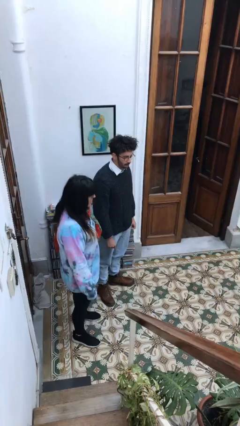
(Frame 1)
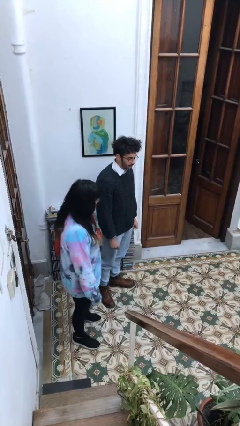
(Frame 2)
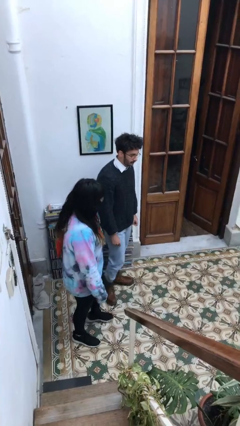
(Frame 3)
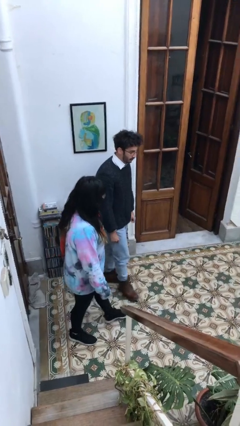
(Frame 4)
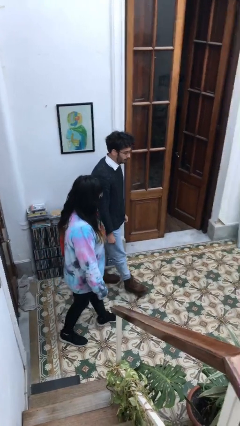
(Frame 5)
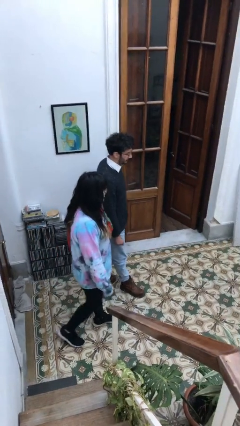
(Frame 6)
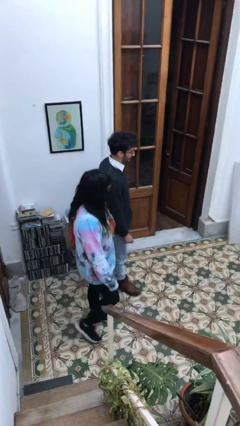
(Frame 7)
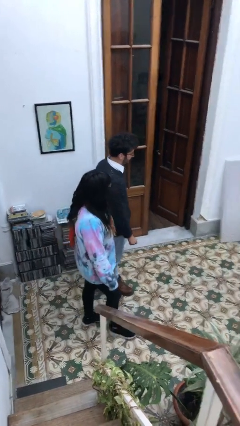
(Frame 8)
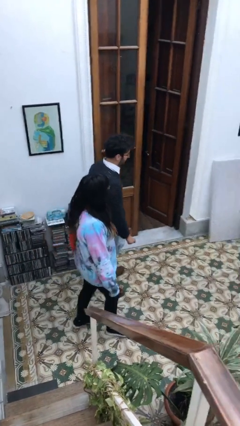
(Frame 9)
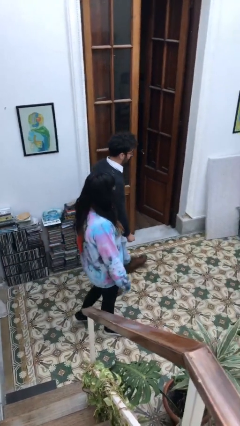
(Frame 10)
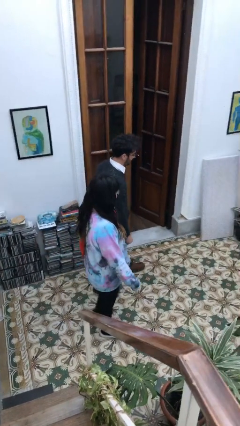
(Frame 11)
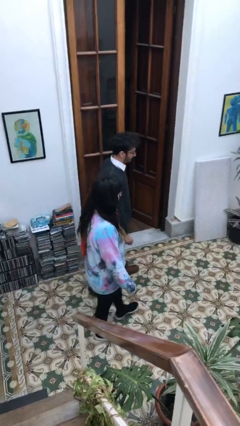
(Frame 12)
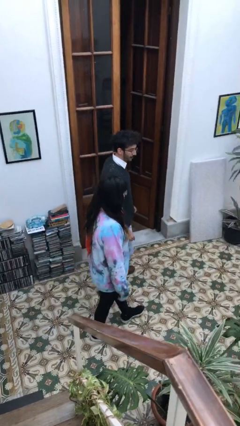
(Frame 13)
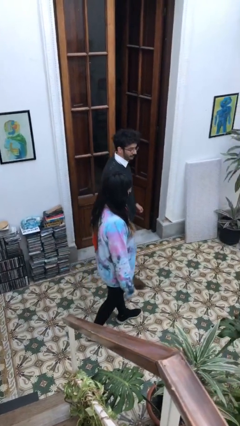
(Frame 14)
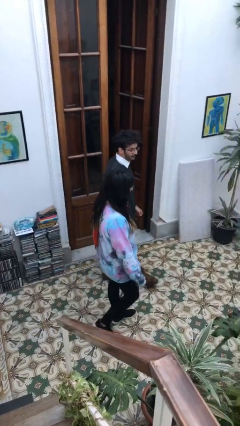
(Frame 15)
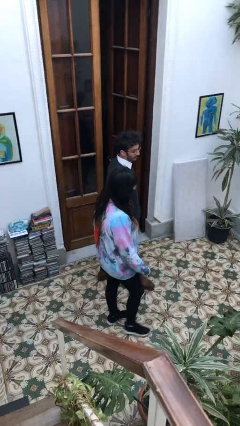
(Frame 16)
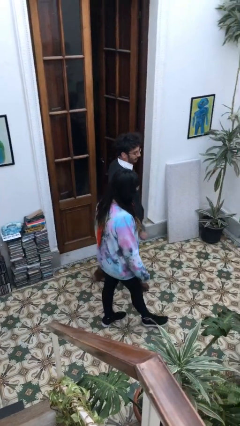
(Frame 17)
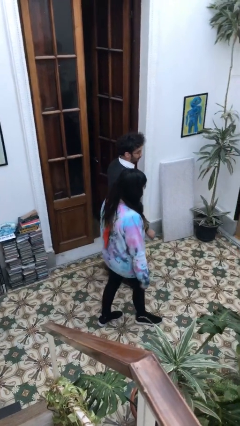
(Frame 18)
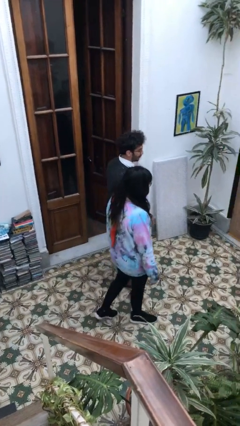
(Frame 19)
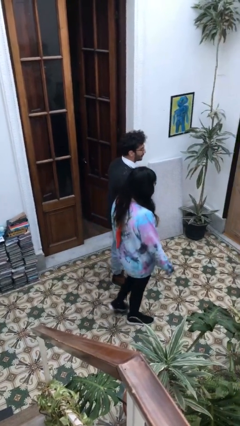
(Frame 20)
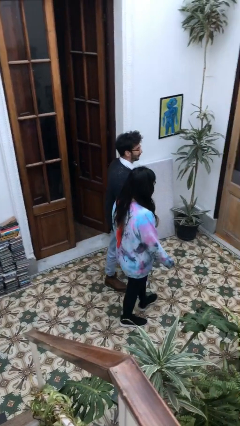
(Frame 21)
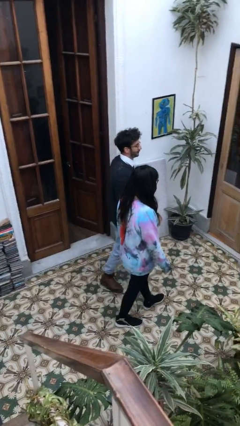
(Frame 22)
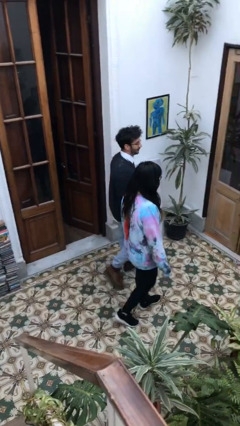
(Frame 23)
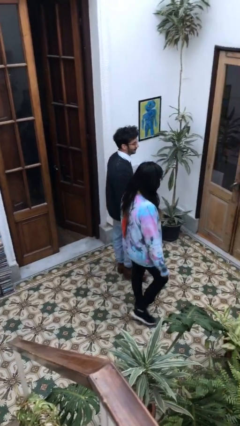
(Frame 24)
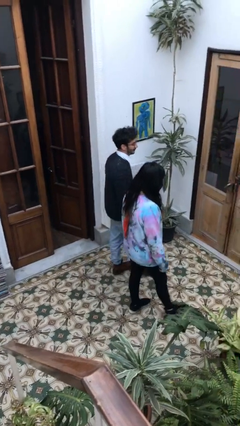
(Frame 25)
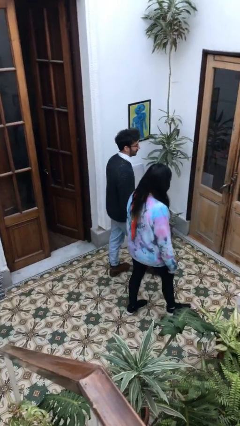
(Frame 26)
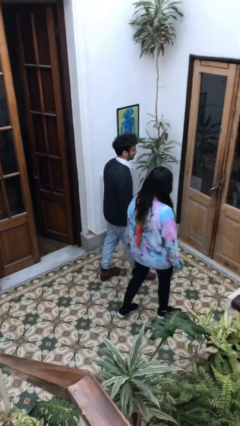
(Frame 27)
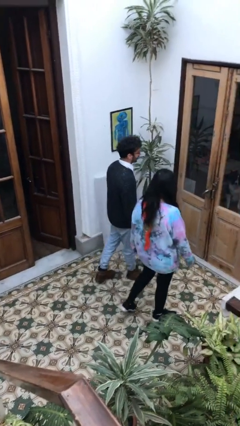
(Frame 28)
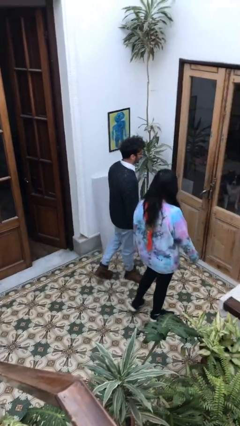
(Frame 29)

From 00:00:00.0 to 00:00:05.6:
person talks to person

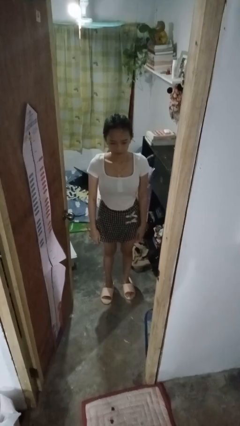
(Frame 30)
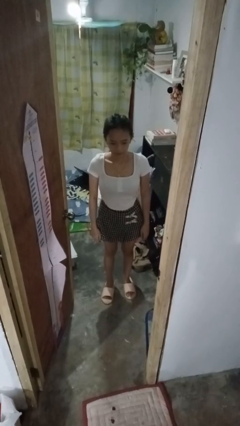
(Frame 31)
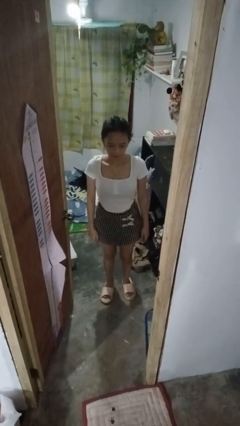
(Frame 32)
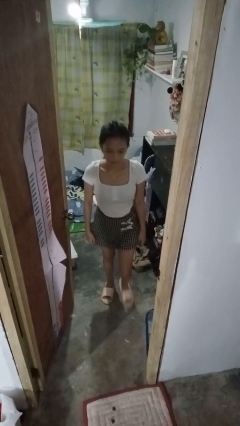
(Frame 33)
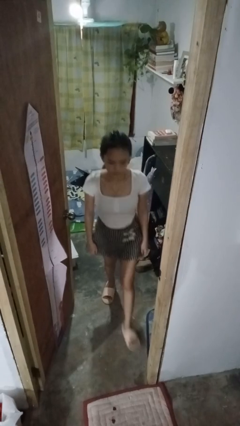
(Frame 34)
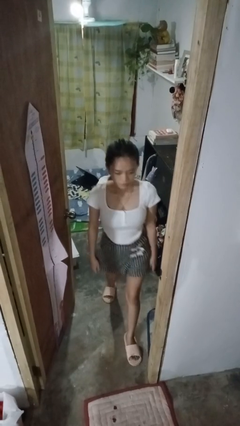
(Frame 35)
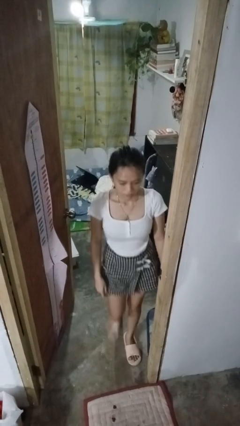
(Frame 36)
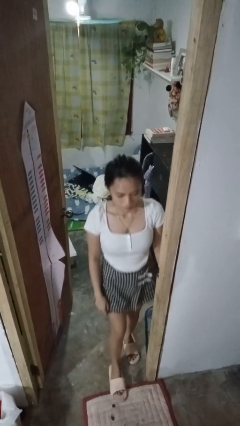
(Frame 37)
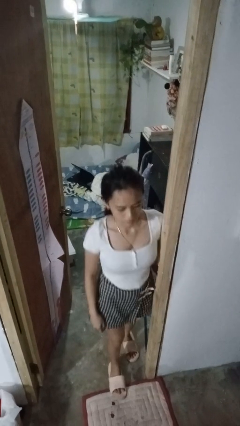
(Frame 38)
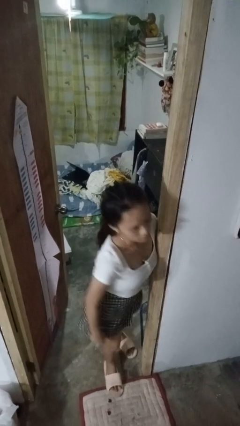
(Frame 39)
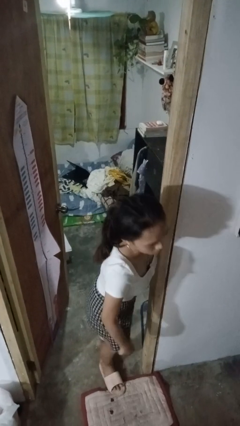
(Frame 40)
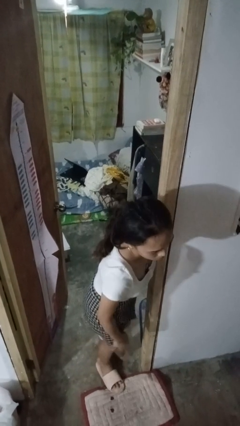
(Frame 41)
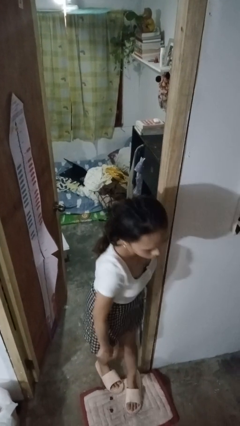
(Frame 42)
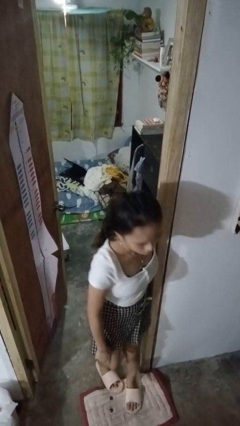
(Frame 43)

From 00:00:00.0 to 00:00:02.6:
person bumps into wall

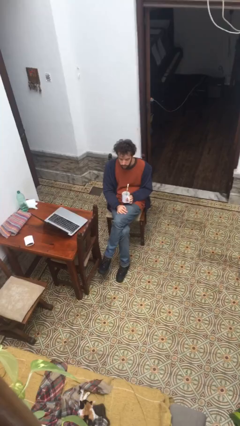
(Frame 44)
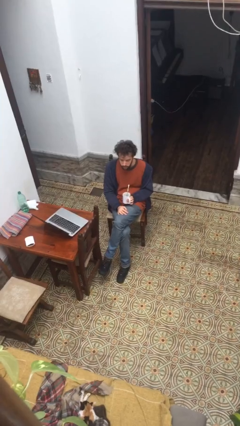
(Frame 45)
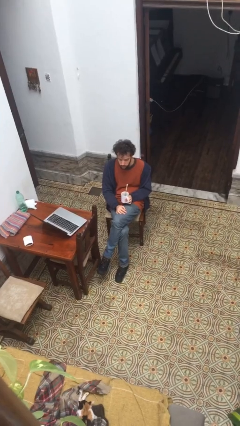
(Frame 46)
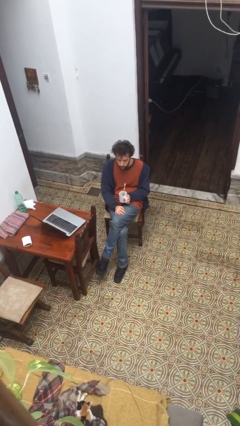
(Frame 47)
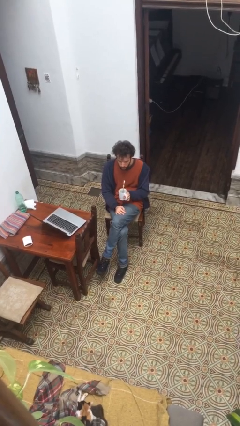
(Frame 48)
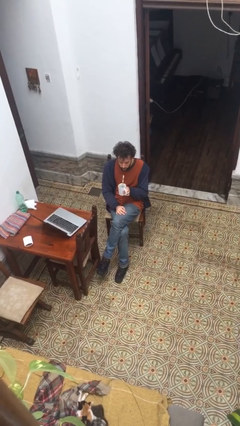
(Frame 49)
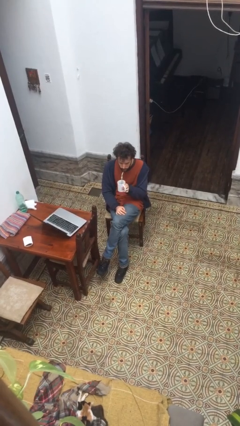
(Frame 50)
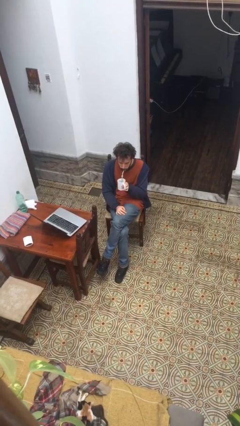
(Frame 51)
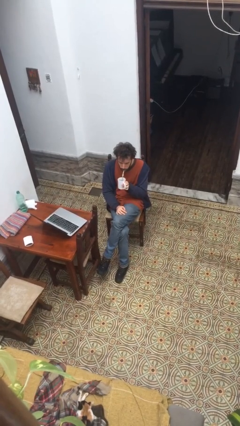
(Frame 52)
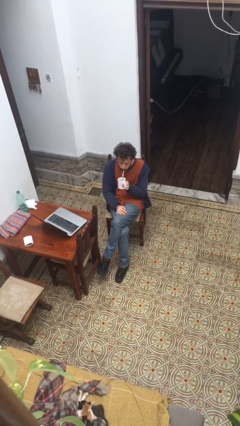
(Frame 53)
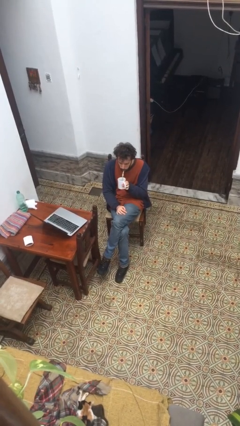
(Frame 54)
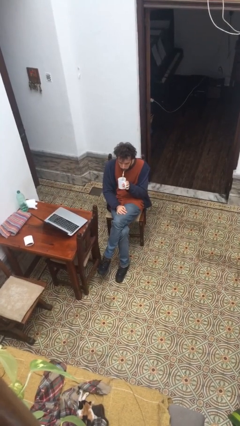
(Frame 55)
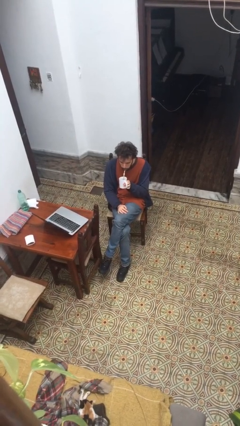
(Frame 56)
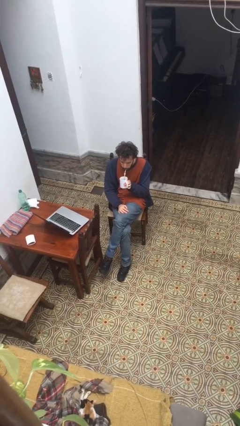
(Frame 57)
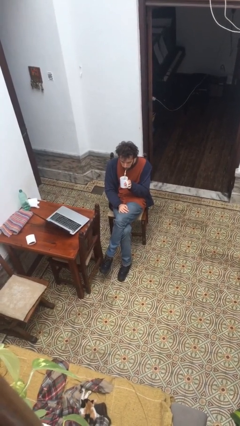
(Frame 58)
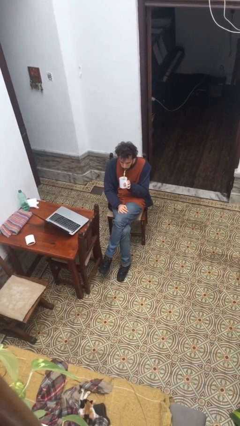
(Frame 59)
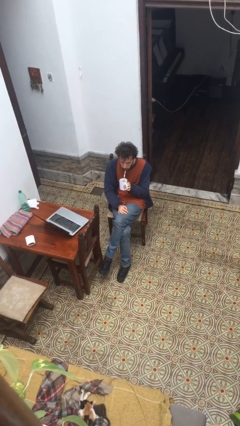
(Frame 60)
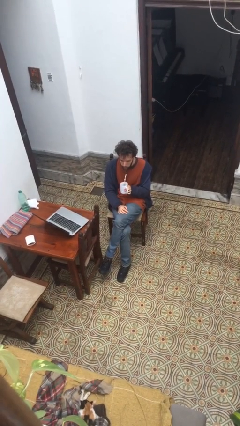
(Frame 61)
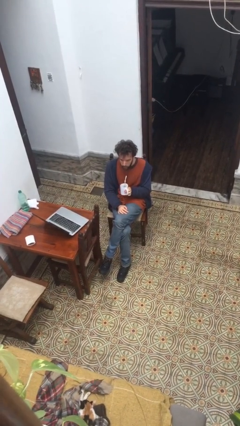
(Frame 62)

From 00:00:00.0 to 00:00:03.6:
person drinks from straw

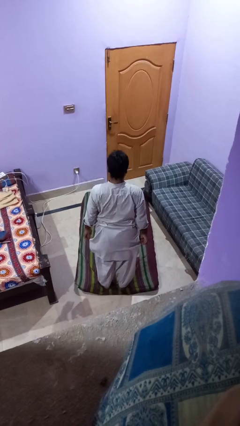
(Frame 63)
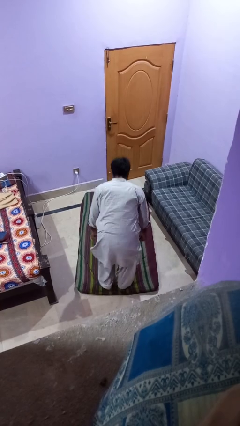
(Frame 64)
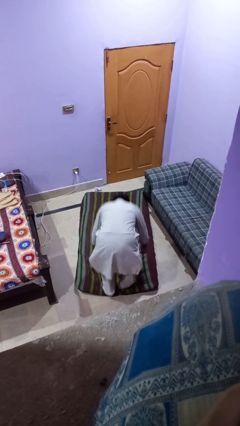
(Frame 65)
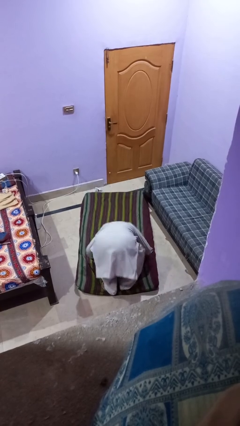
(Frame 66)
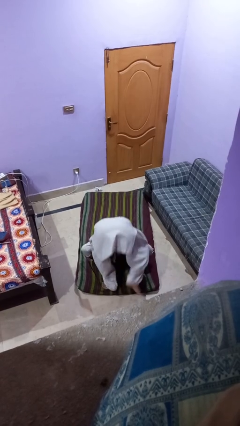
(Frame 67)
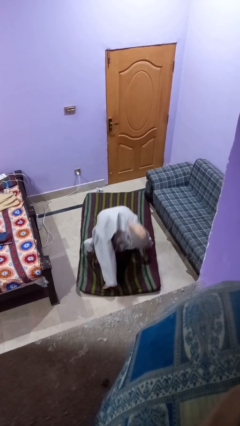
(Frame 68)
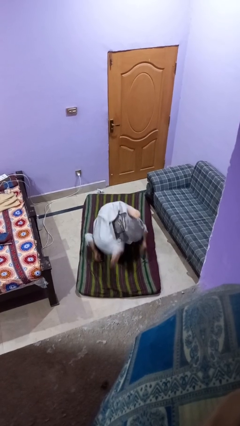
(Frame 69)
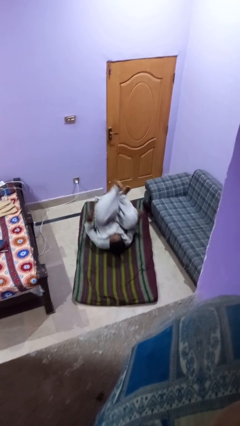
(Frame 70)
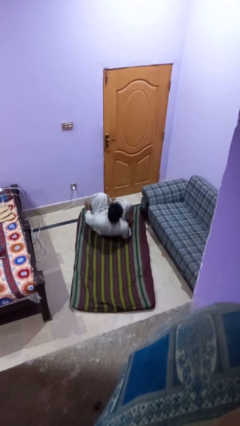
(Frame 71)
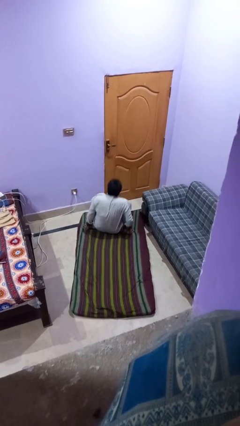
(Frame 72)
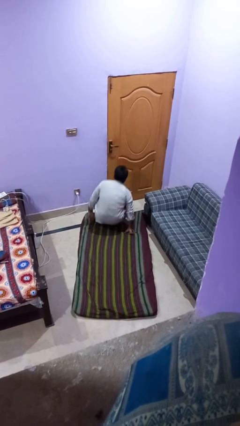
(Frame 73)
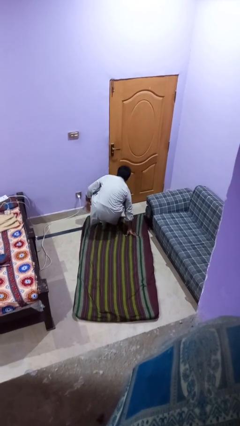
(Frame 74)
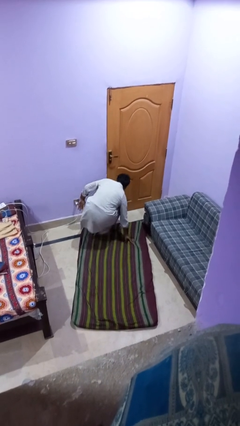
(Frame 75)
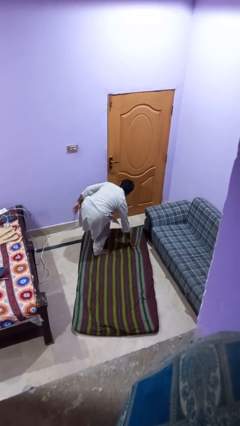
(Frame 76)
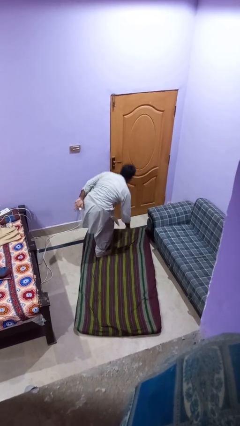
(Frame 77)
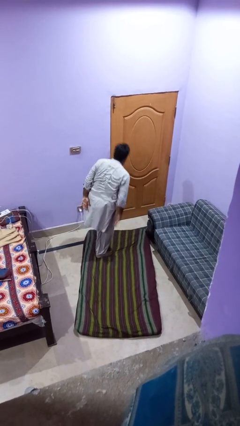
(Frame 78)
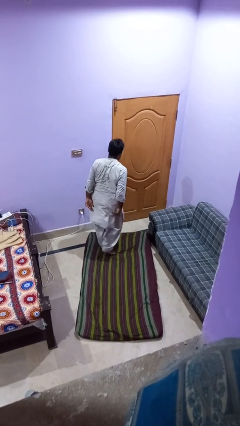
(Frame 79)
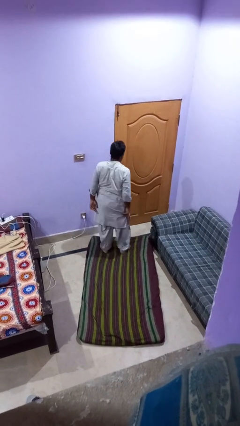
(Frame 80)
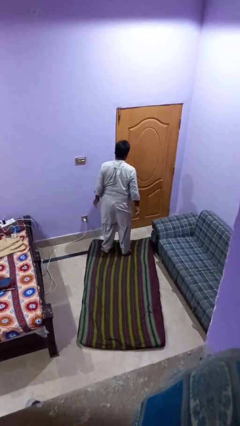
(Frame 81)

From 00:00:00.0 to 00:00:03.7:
person somersaults

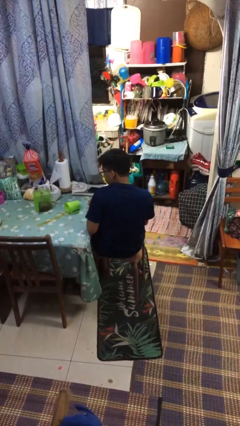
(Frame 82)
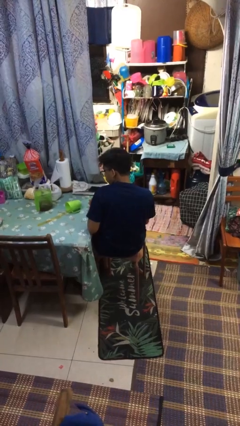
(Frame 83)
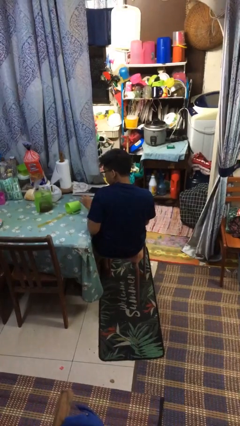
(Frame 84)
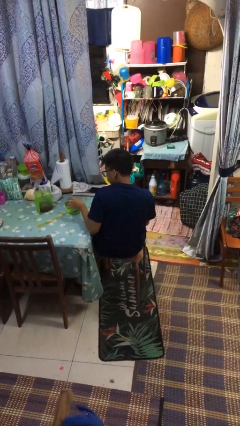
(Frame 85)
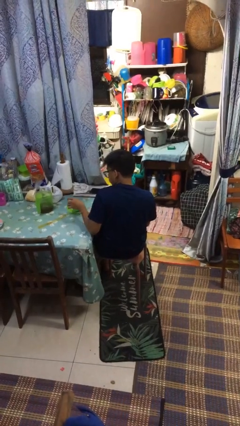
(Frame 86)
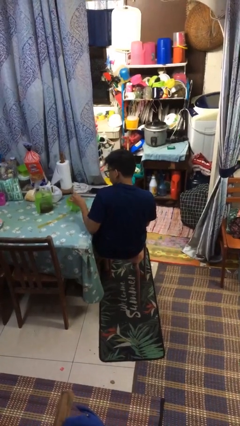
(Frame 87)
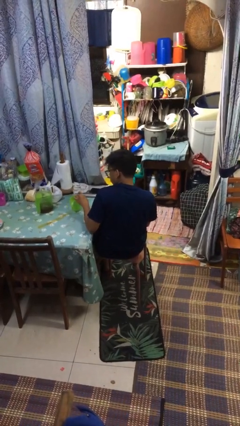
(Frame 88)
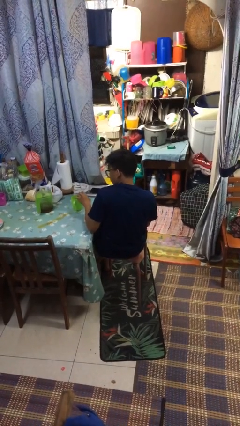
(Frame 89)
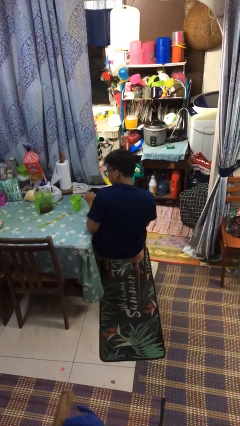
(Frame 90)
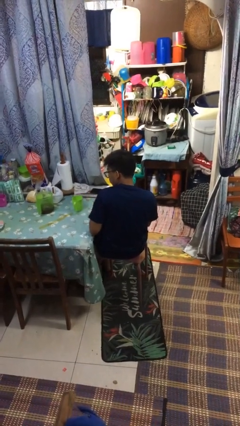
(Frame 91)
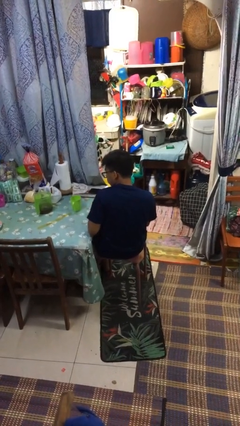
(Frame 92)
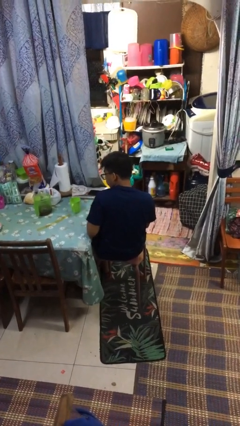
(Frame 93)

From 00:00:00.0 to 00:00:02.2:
person sets upright glass

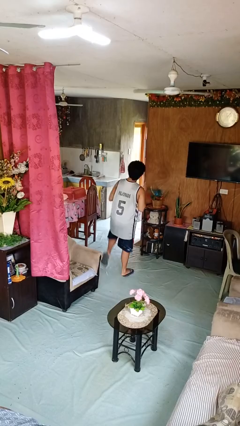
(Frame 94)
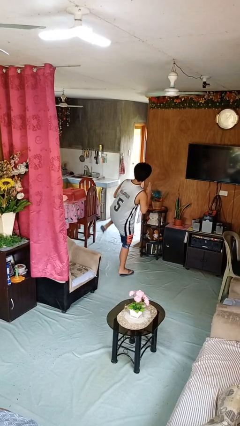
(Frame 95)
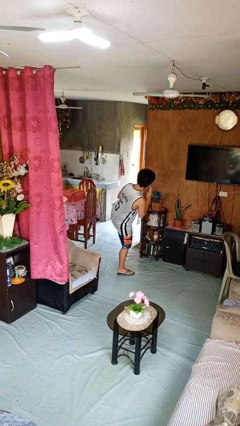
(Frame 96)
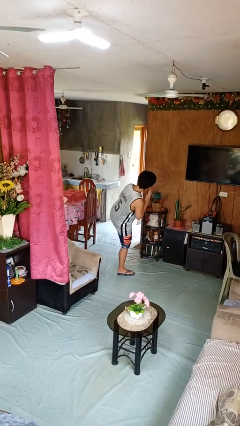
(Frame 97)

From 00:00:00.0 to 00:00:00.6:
person karate kicks
